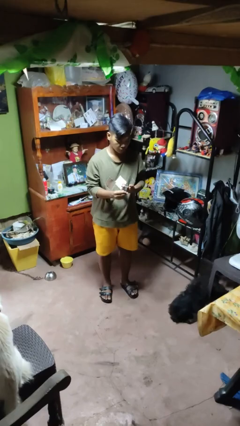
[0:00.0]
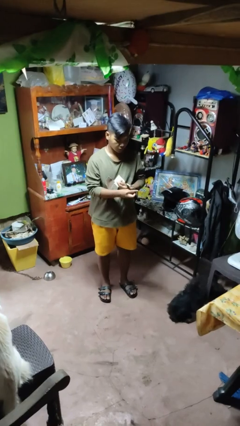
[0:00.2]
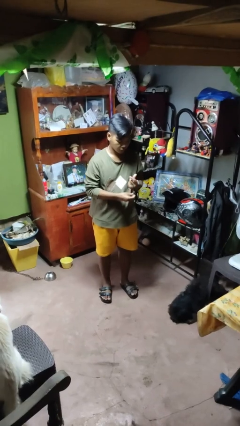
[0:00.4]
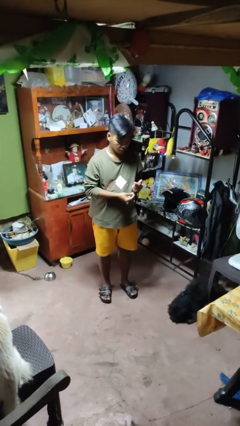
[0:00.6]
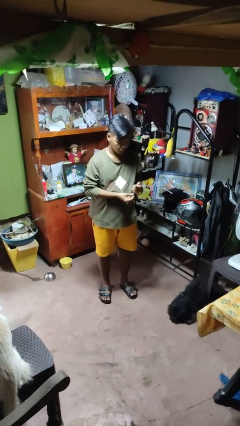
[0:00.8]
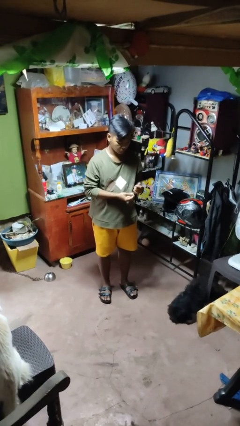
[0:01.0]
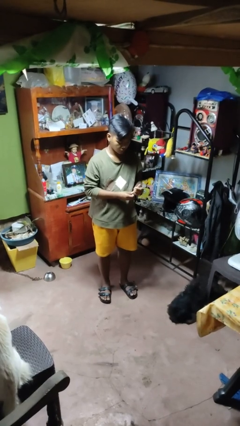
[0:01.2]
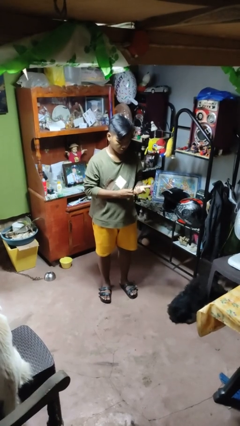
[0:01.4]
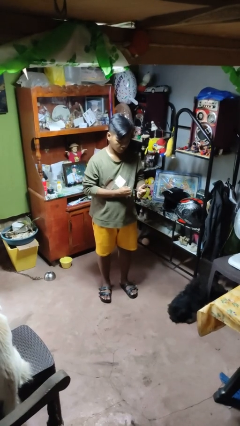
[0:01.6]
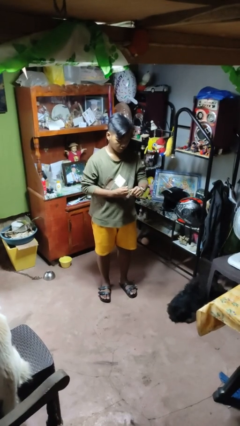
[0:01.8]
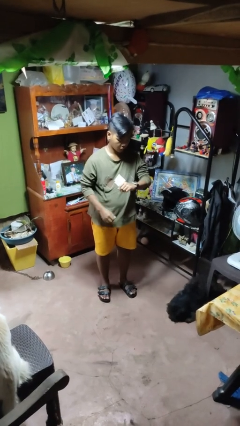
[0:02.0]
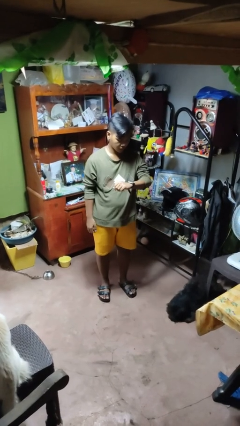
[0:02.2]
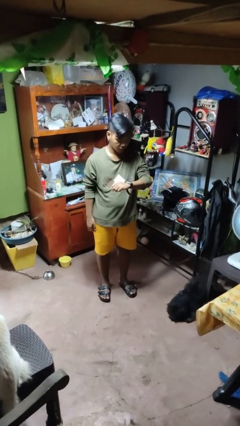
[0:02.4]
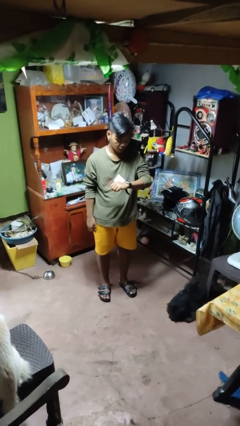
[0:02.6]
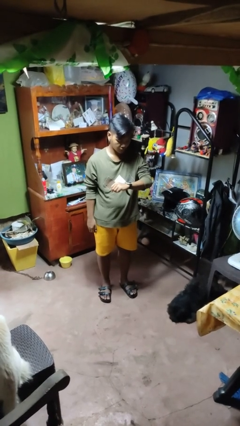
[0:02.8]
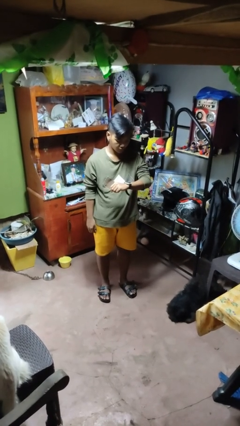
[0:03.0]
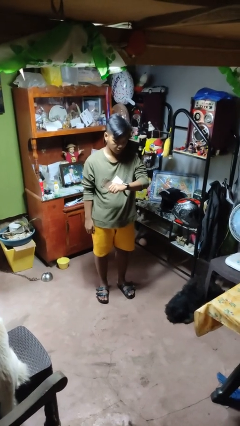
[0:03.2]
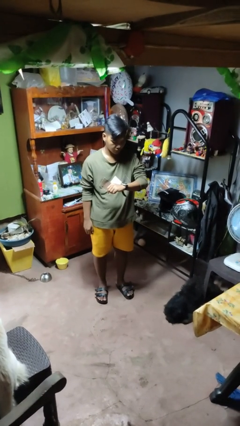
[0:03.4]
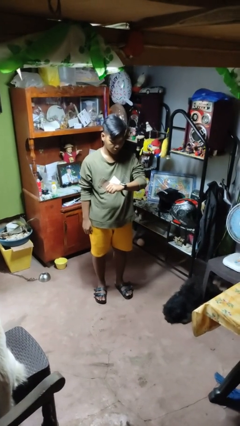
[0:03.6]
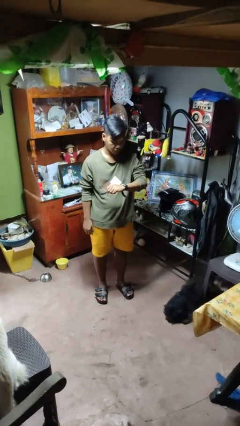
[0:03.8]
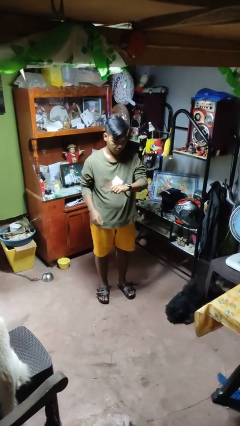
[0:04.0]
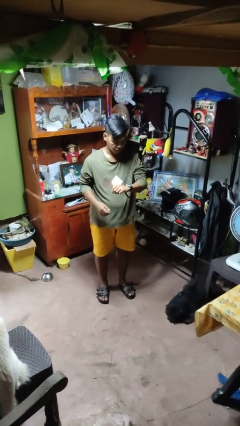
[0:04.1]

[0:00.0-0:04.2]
person puts on wristwatch

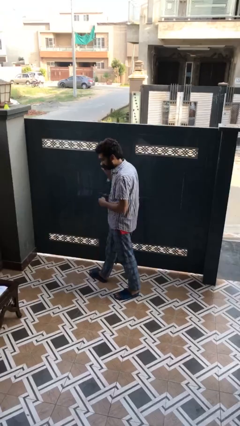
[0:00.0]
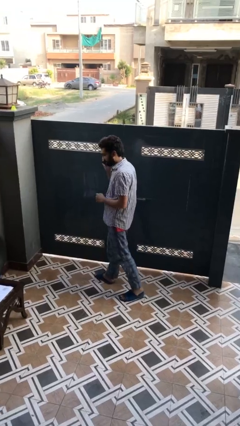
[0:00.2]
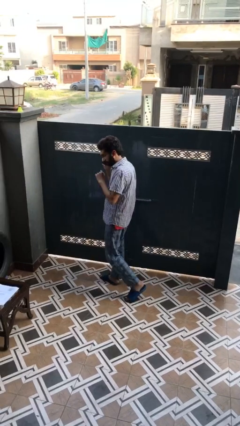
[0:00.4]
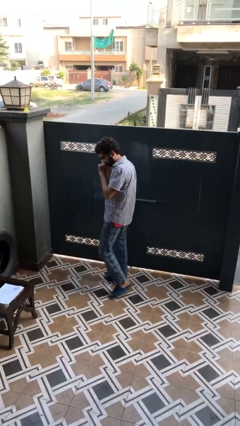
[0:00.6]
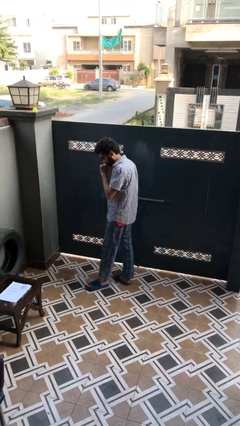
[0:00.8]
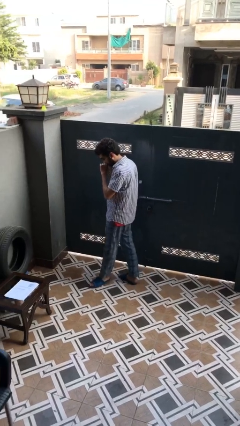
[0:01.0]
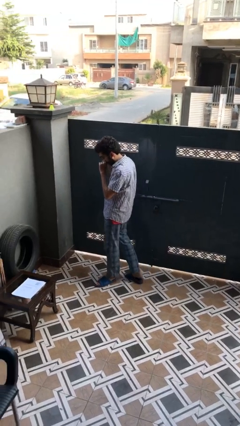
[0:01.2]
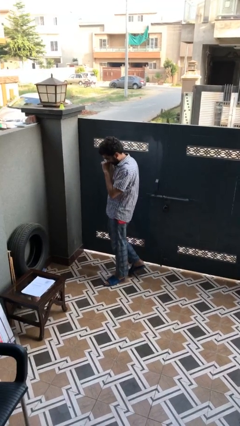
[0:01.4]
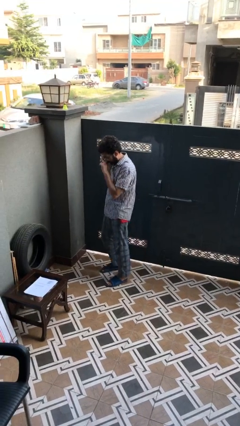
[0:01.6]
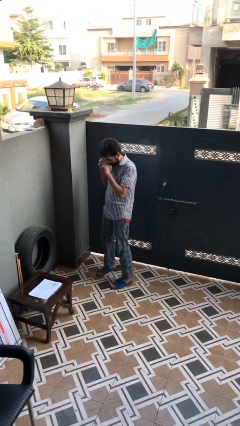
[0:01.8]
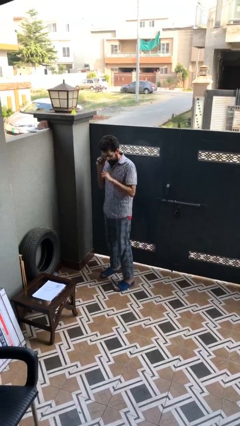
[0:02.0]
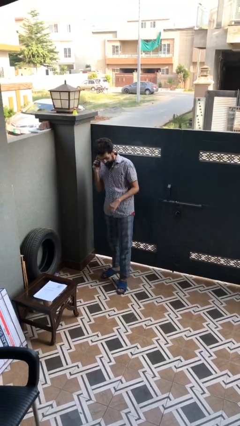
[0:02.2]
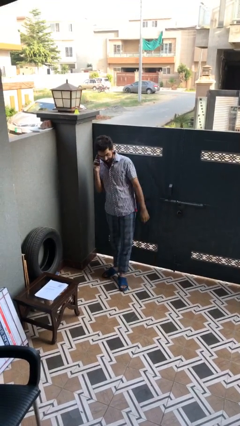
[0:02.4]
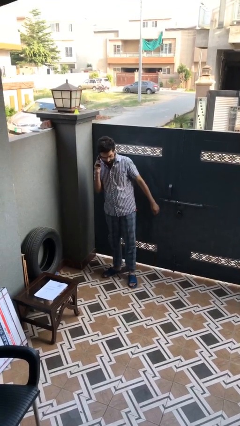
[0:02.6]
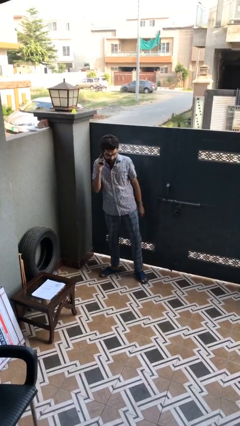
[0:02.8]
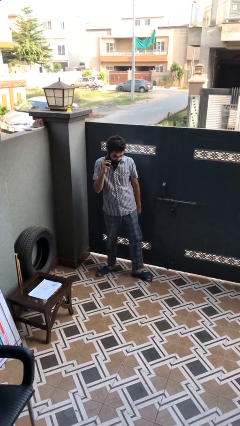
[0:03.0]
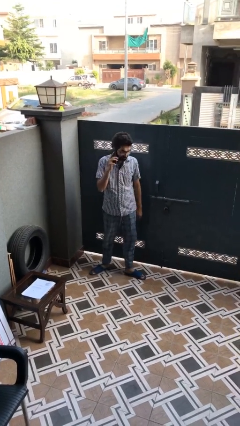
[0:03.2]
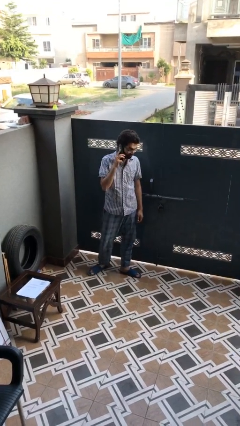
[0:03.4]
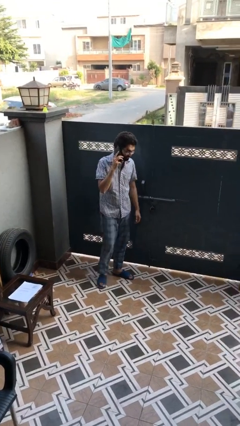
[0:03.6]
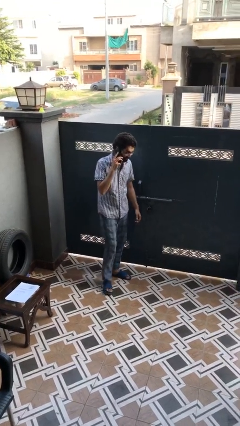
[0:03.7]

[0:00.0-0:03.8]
person talks on phone

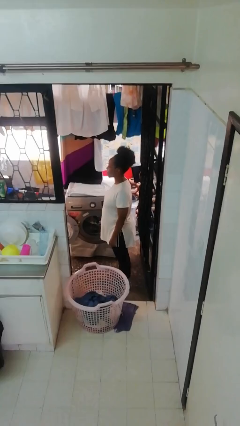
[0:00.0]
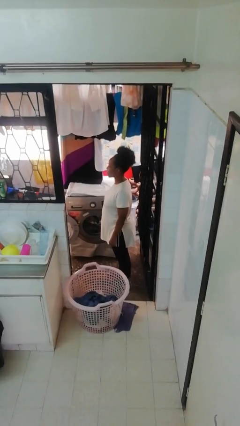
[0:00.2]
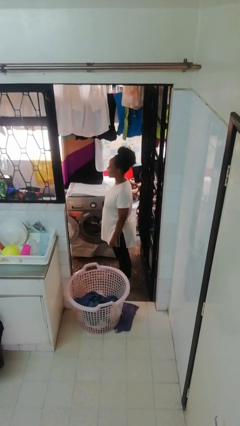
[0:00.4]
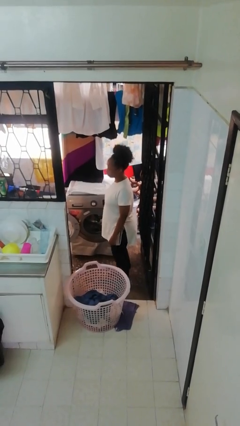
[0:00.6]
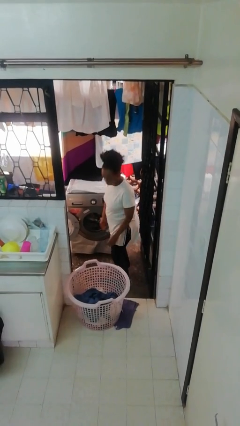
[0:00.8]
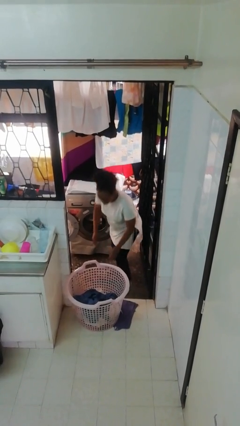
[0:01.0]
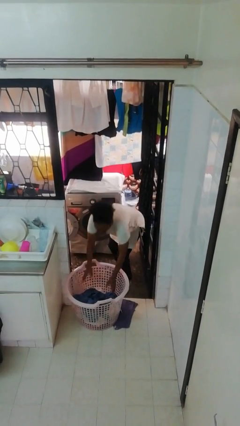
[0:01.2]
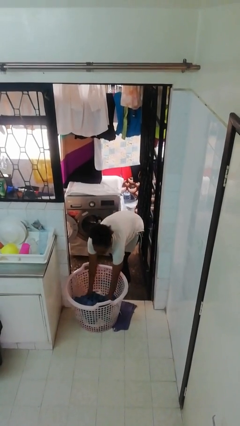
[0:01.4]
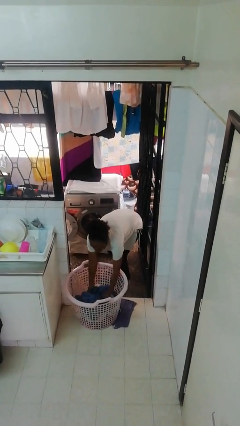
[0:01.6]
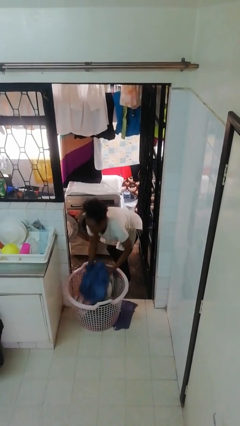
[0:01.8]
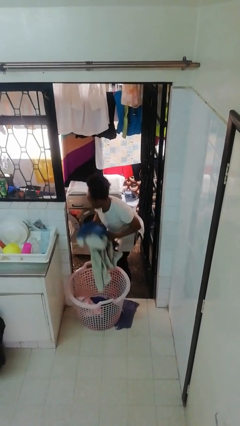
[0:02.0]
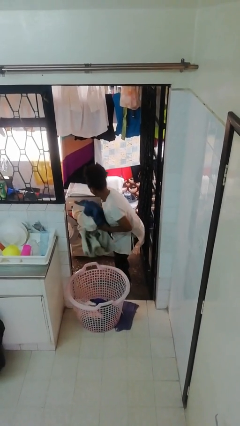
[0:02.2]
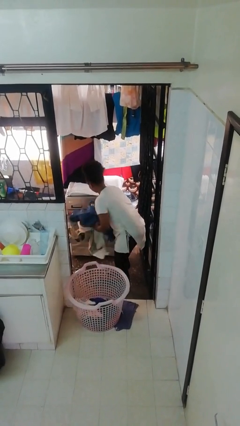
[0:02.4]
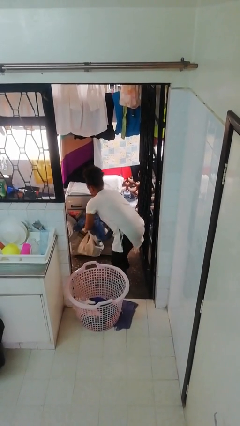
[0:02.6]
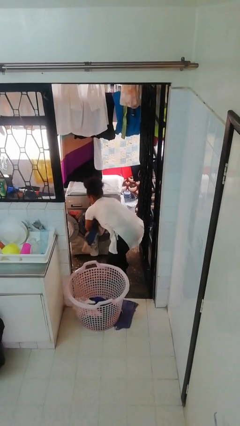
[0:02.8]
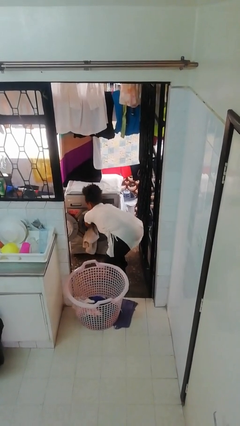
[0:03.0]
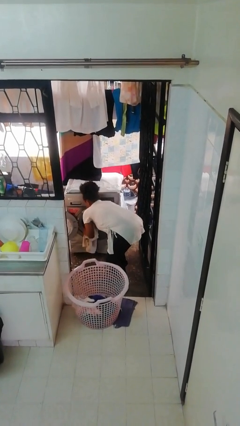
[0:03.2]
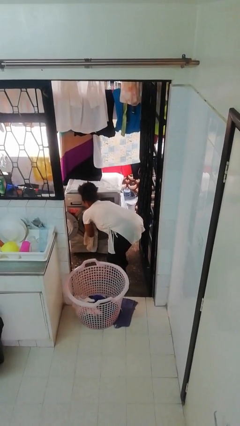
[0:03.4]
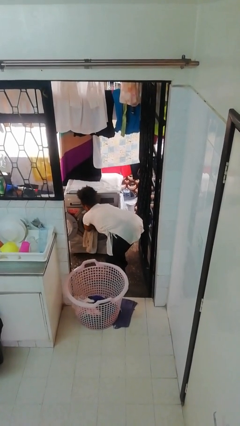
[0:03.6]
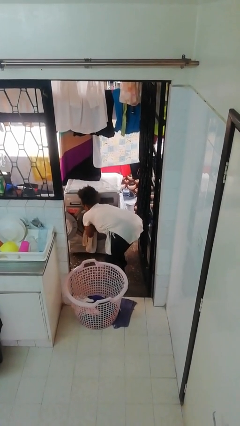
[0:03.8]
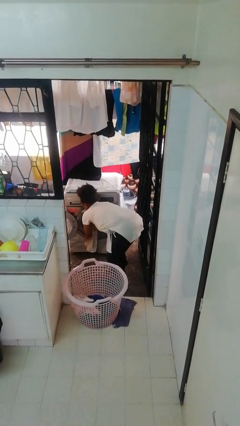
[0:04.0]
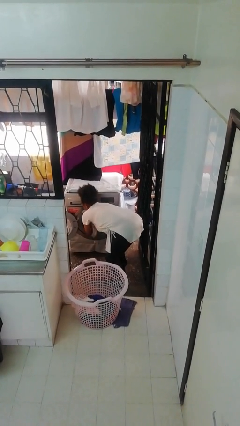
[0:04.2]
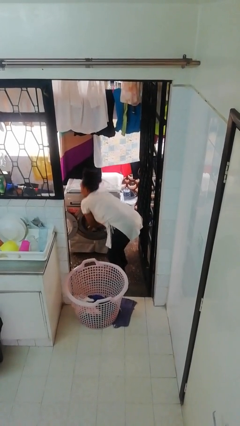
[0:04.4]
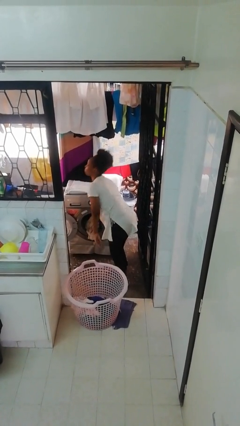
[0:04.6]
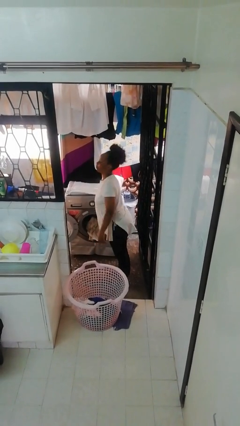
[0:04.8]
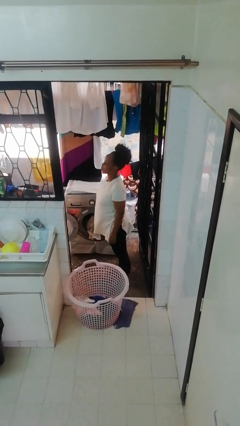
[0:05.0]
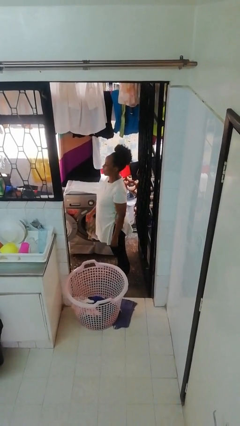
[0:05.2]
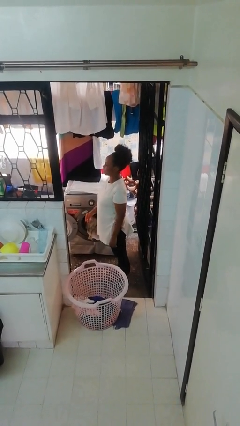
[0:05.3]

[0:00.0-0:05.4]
person loads clotheswasher

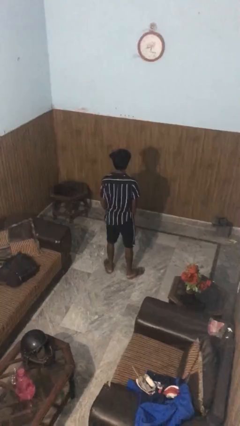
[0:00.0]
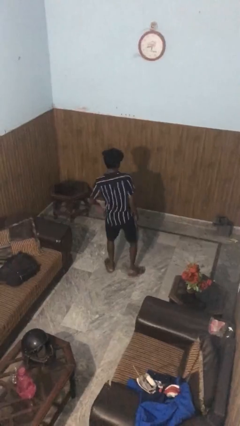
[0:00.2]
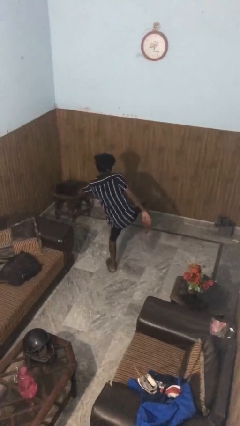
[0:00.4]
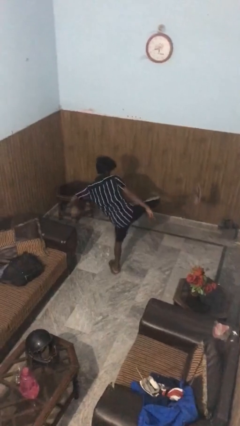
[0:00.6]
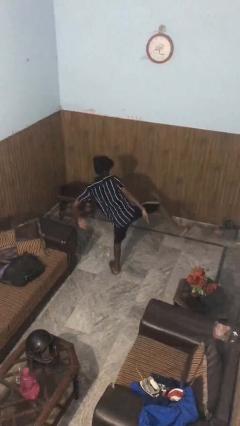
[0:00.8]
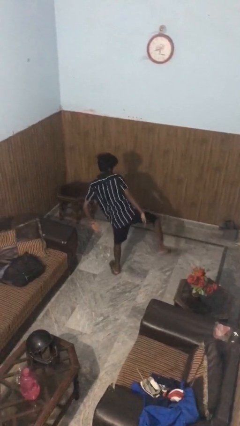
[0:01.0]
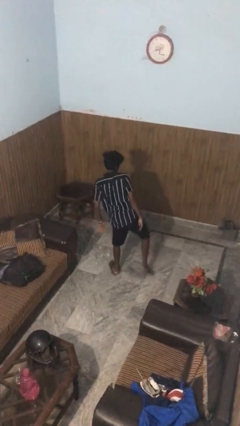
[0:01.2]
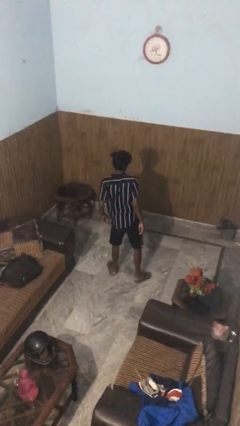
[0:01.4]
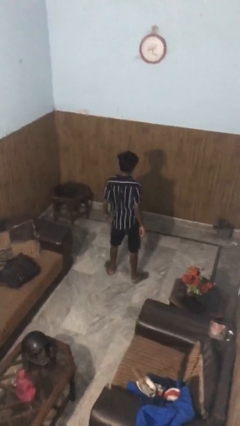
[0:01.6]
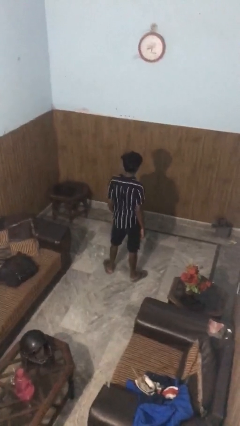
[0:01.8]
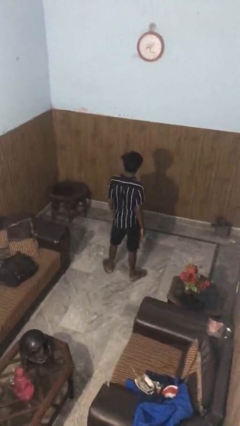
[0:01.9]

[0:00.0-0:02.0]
person karate kicks

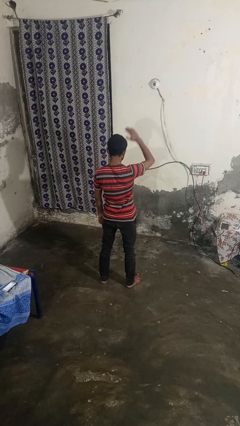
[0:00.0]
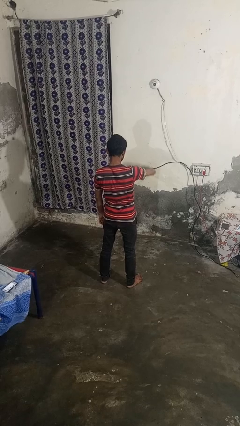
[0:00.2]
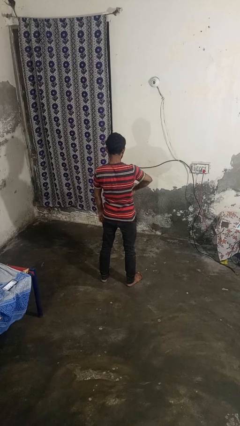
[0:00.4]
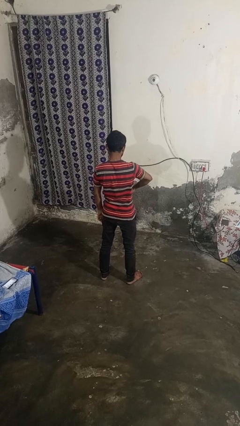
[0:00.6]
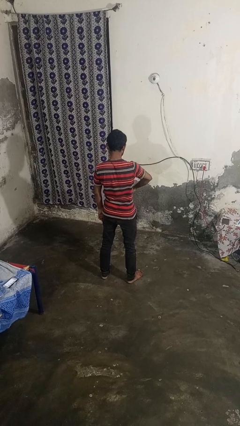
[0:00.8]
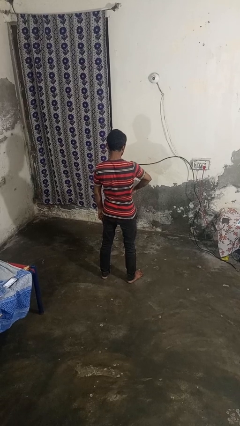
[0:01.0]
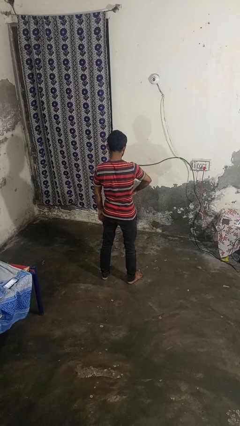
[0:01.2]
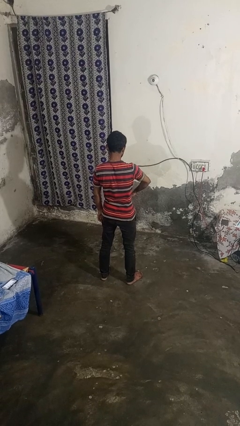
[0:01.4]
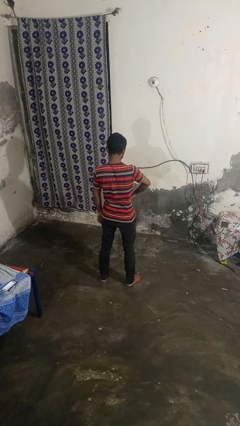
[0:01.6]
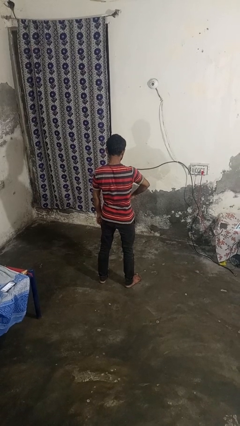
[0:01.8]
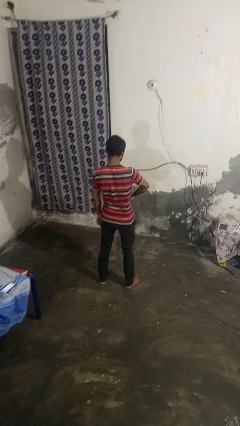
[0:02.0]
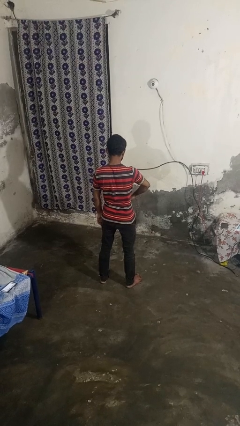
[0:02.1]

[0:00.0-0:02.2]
person gestures swipe down
